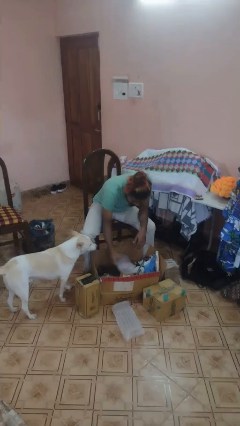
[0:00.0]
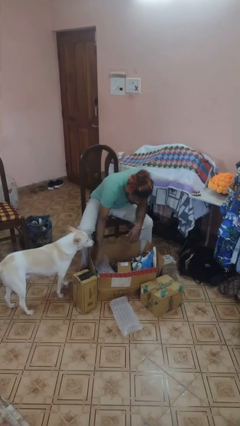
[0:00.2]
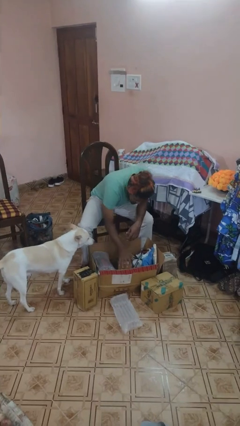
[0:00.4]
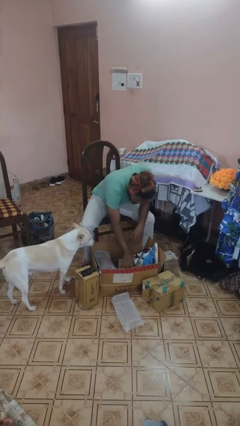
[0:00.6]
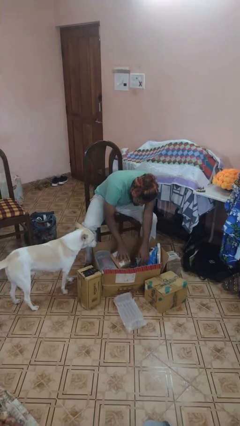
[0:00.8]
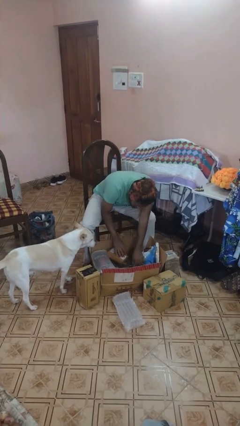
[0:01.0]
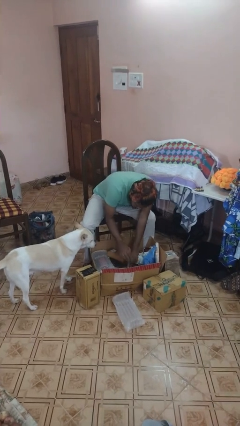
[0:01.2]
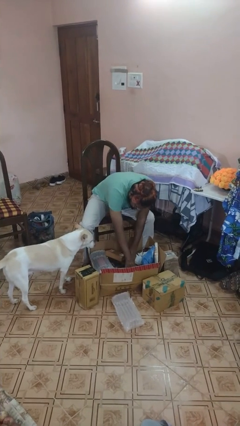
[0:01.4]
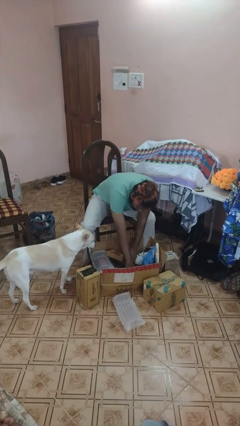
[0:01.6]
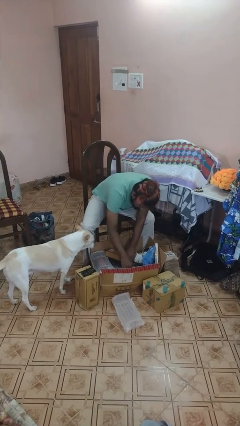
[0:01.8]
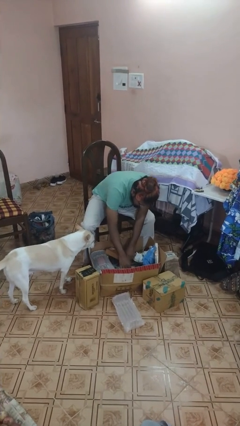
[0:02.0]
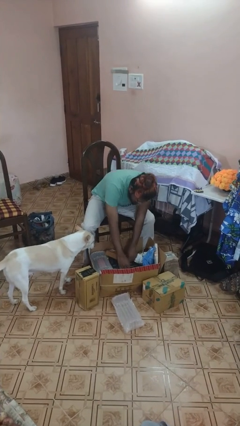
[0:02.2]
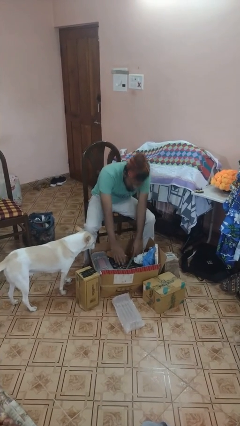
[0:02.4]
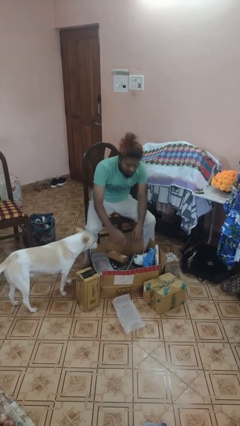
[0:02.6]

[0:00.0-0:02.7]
person searches in box

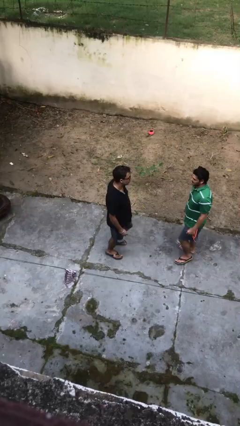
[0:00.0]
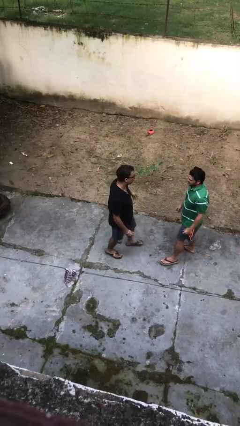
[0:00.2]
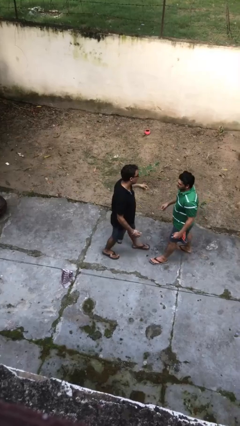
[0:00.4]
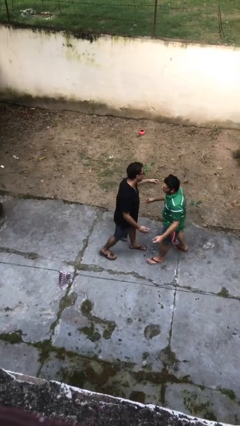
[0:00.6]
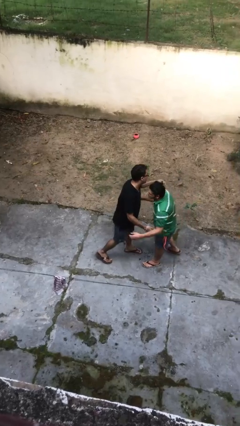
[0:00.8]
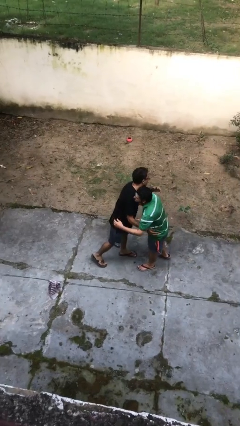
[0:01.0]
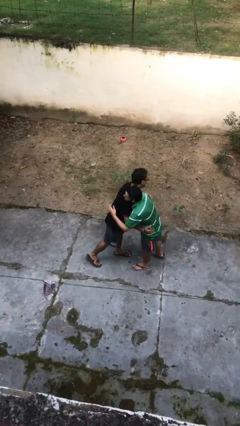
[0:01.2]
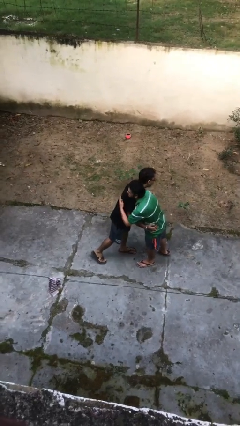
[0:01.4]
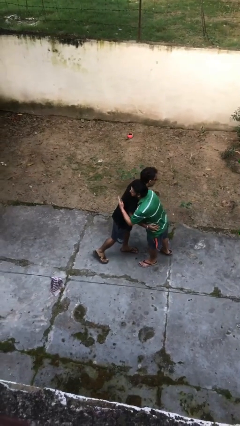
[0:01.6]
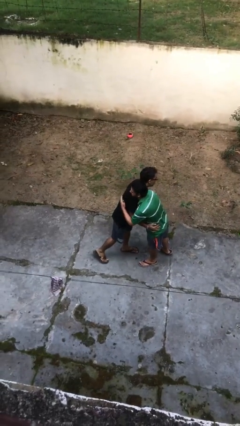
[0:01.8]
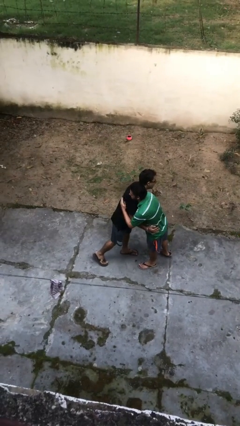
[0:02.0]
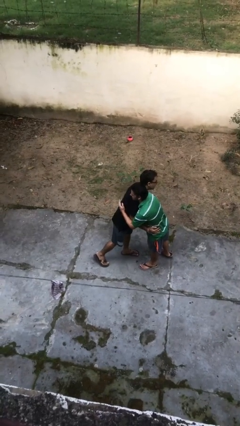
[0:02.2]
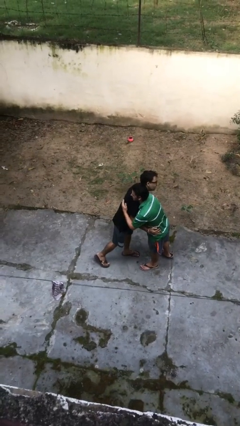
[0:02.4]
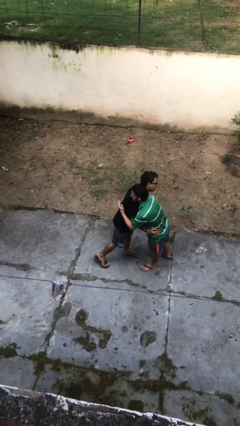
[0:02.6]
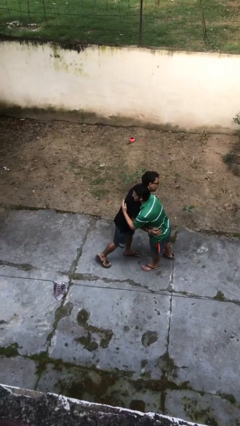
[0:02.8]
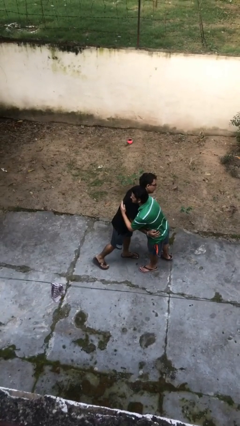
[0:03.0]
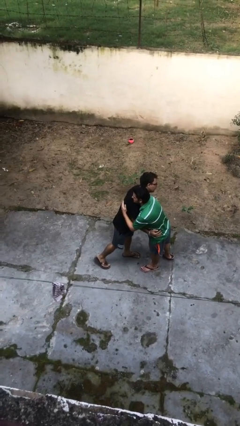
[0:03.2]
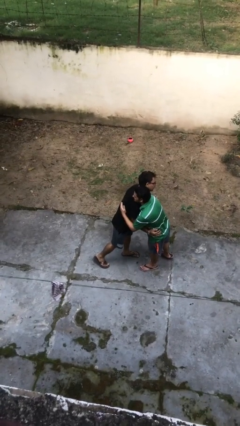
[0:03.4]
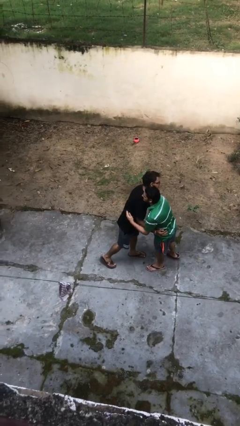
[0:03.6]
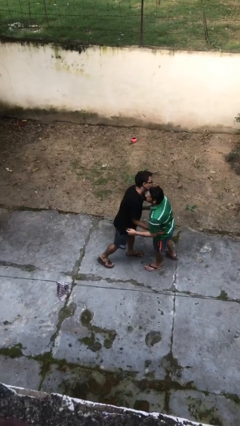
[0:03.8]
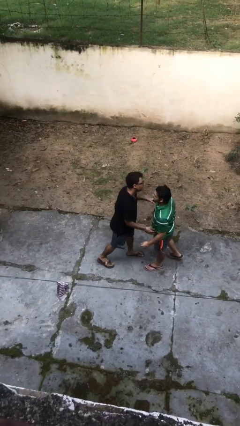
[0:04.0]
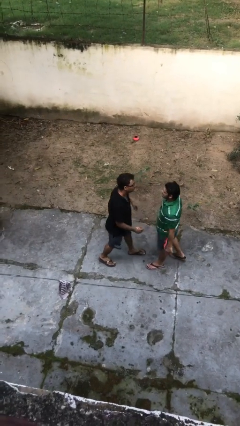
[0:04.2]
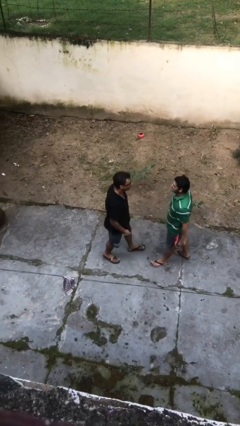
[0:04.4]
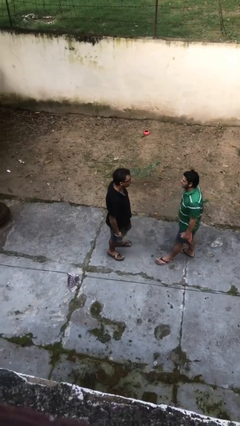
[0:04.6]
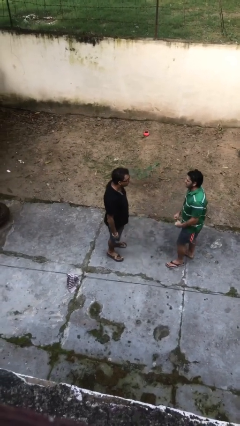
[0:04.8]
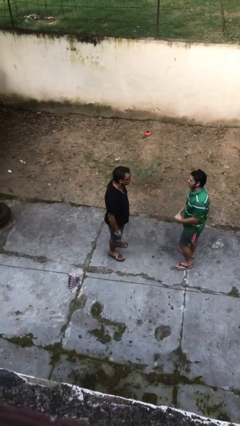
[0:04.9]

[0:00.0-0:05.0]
person embraces person

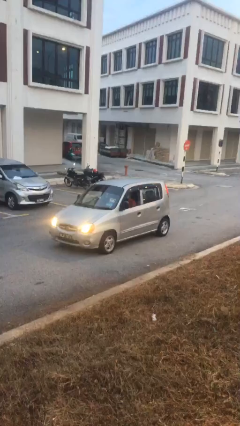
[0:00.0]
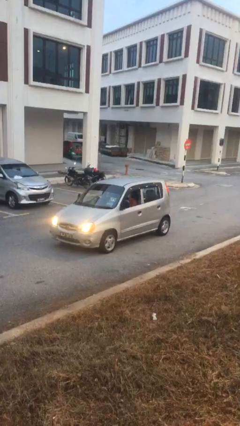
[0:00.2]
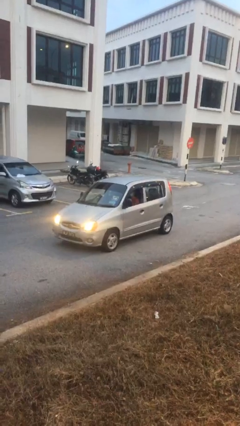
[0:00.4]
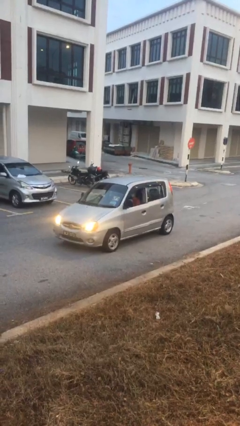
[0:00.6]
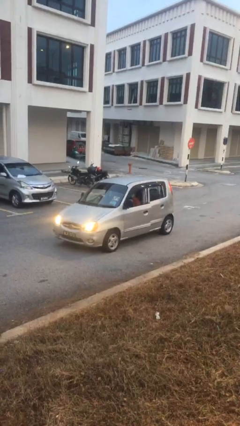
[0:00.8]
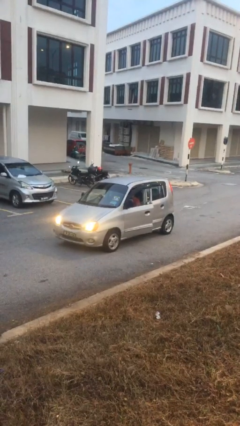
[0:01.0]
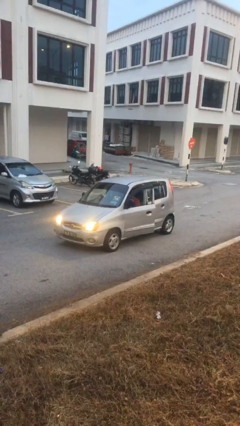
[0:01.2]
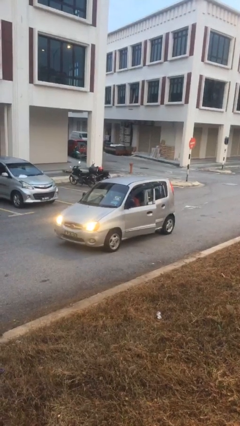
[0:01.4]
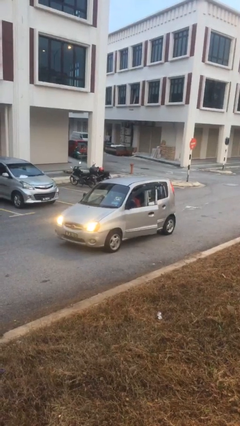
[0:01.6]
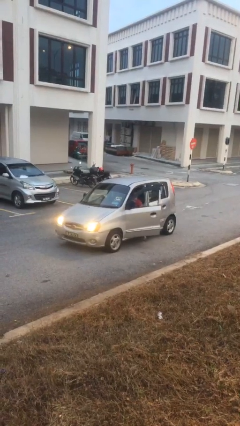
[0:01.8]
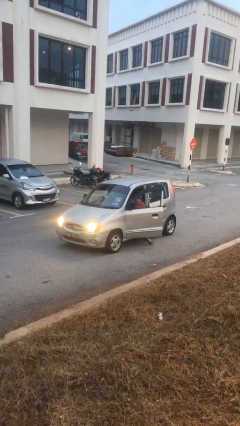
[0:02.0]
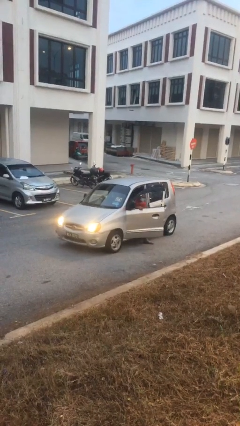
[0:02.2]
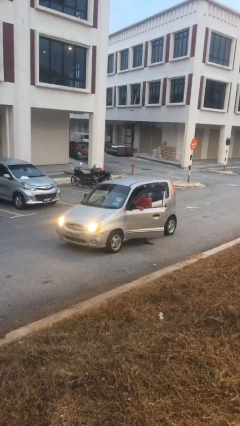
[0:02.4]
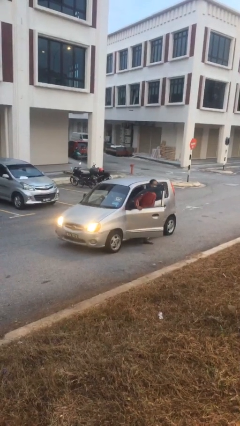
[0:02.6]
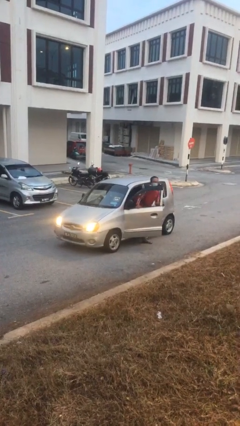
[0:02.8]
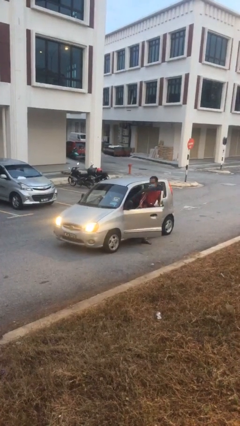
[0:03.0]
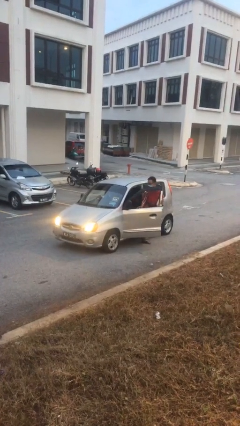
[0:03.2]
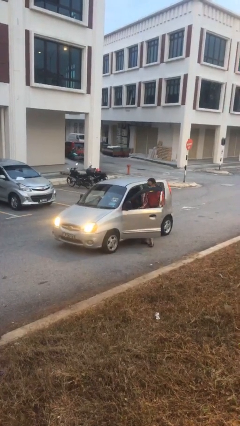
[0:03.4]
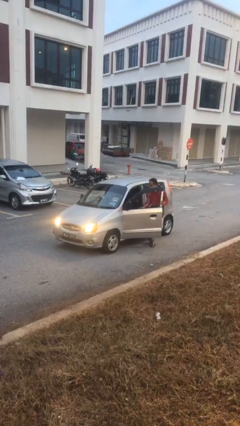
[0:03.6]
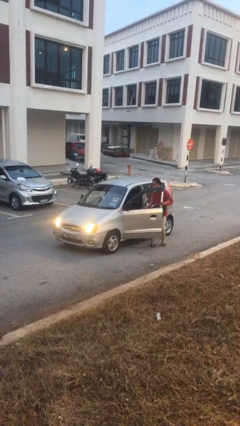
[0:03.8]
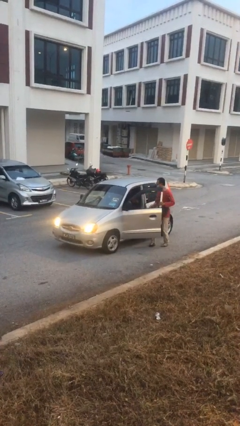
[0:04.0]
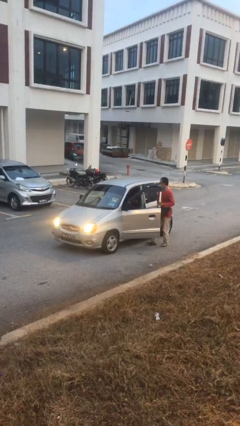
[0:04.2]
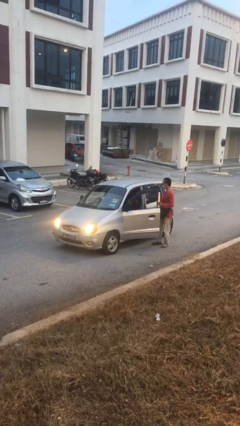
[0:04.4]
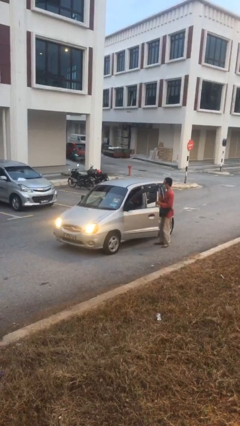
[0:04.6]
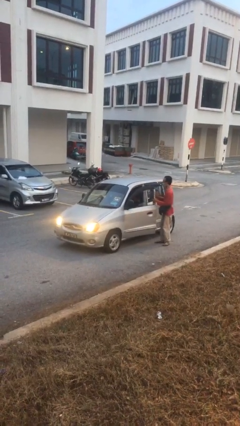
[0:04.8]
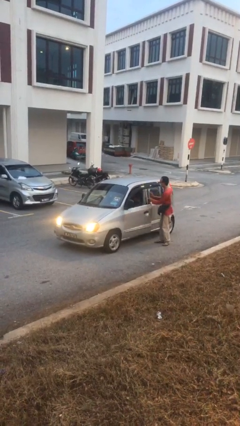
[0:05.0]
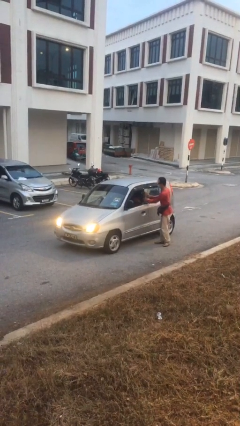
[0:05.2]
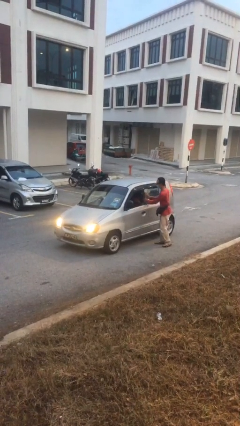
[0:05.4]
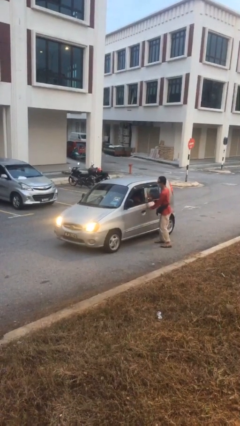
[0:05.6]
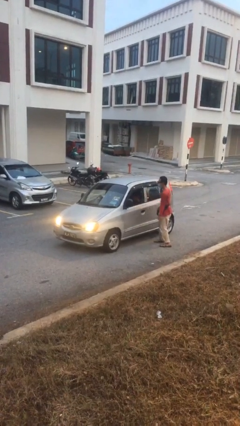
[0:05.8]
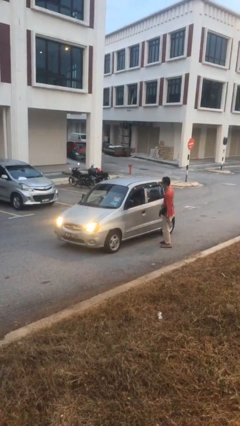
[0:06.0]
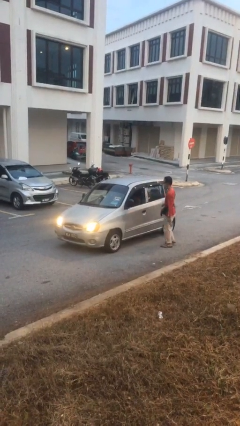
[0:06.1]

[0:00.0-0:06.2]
car drops off person

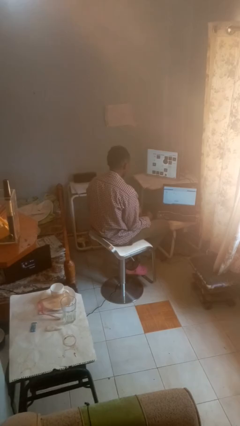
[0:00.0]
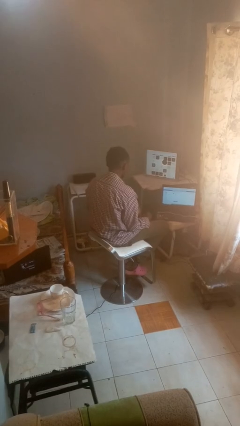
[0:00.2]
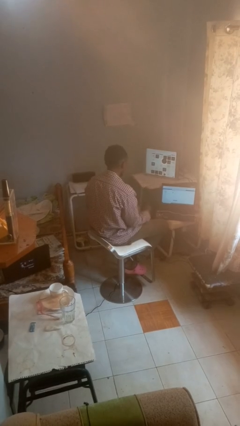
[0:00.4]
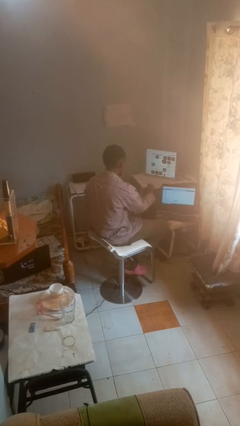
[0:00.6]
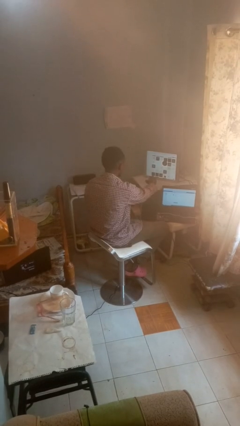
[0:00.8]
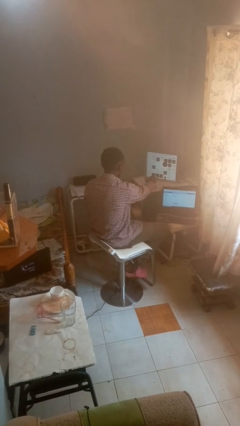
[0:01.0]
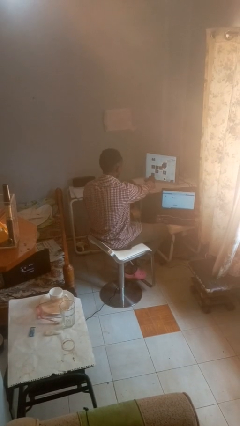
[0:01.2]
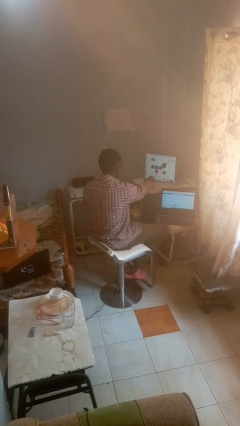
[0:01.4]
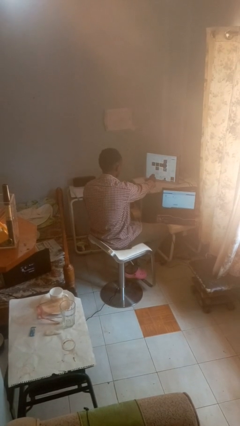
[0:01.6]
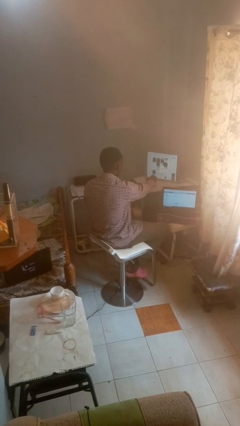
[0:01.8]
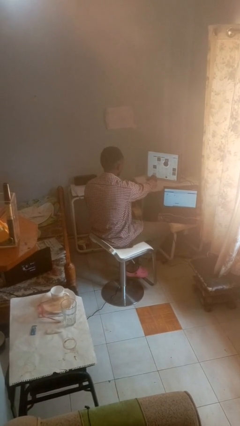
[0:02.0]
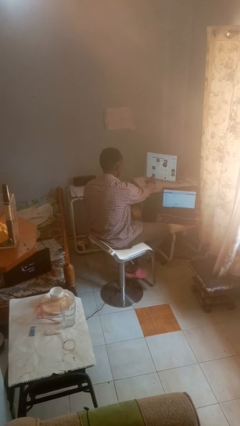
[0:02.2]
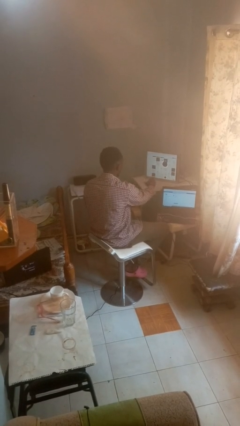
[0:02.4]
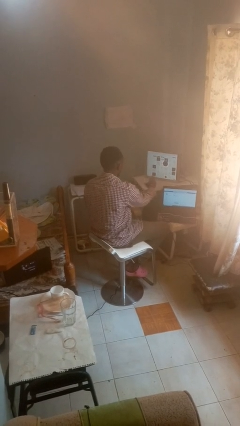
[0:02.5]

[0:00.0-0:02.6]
person uses television remote

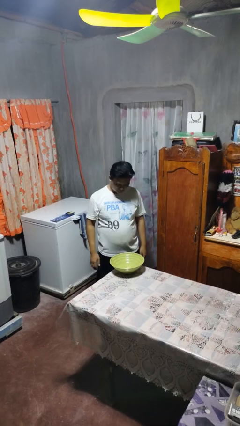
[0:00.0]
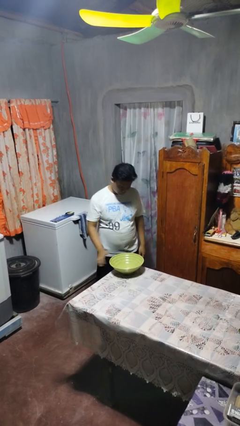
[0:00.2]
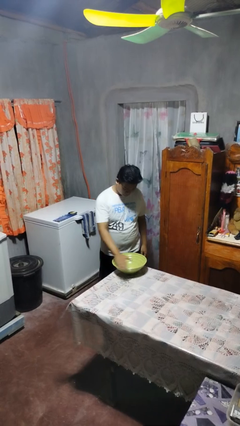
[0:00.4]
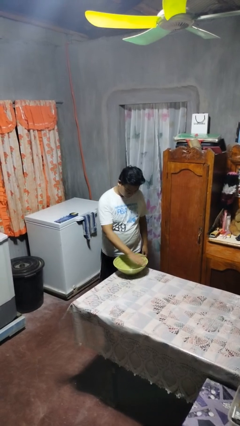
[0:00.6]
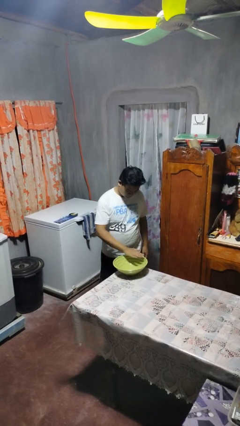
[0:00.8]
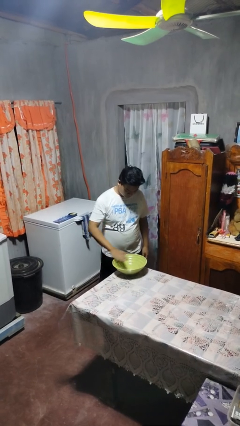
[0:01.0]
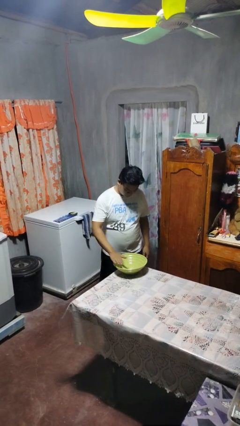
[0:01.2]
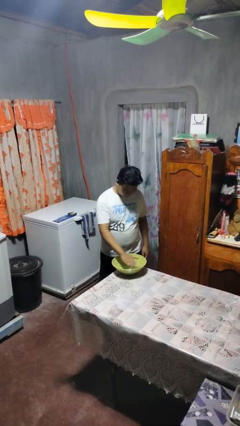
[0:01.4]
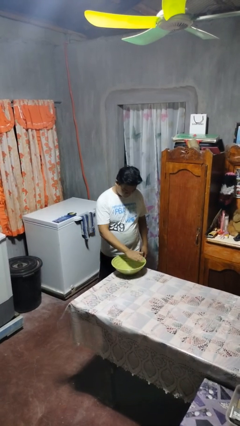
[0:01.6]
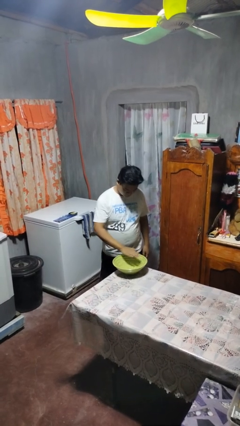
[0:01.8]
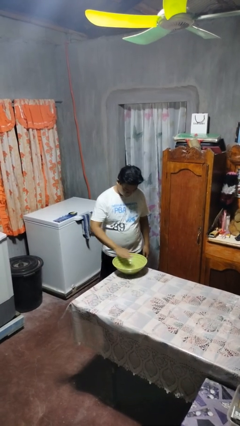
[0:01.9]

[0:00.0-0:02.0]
person waves hand over object
